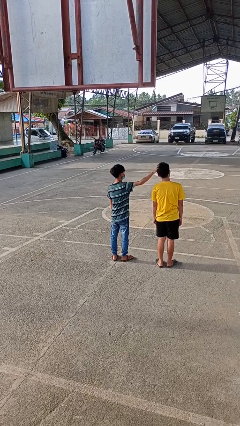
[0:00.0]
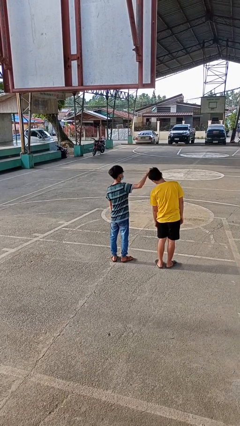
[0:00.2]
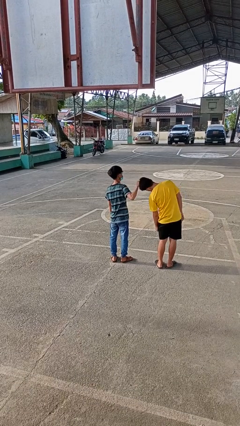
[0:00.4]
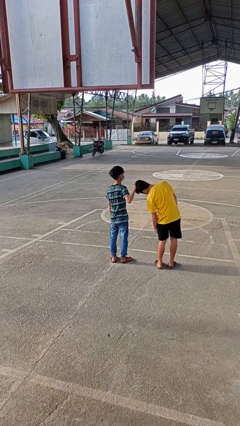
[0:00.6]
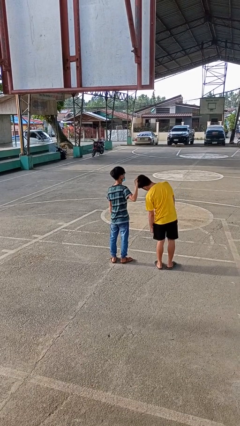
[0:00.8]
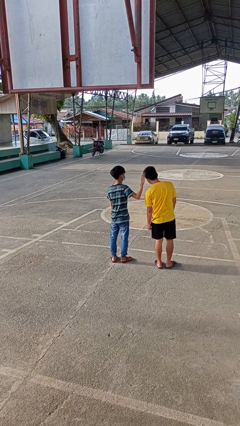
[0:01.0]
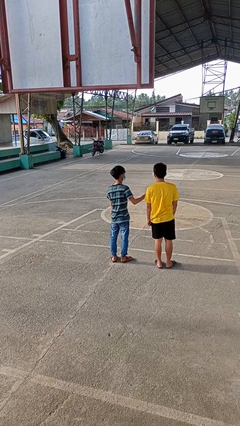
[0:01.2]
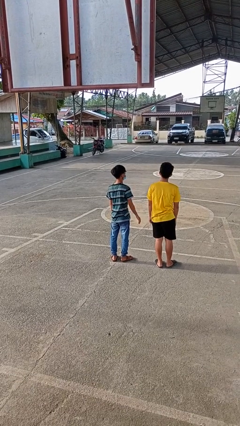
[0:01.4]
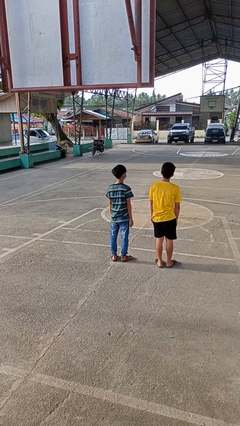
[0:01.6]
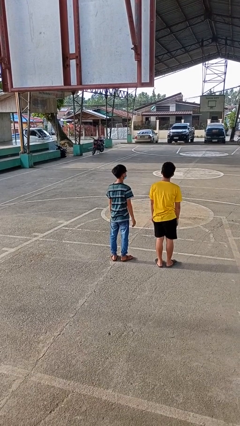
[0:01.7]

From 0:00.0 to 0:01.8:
person grabs person by hair

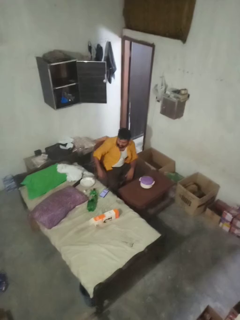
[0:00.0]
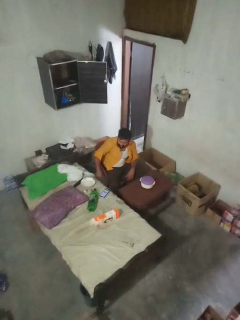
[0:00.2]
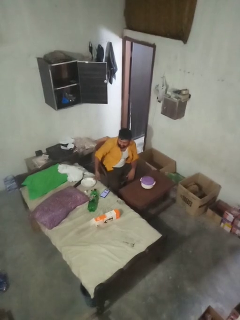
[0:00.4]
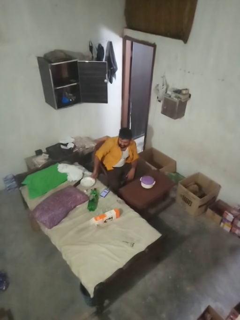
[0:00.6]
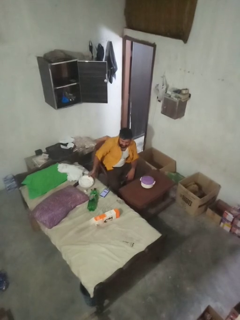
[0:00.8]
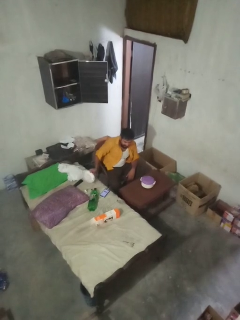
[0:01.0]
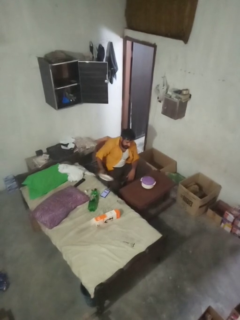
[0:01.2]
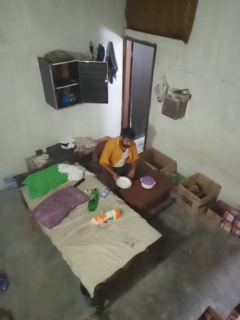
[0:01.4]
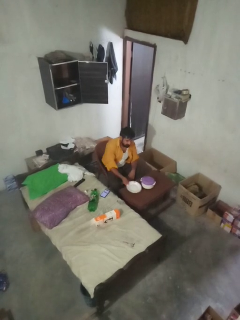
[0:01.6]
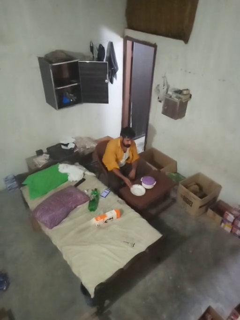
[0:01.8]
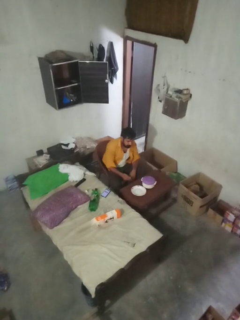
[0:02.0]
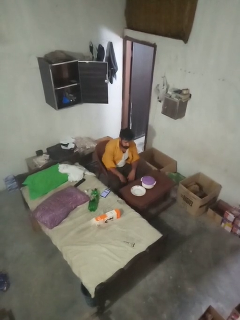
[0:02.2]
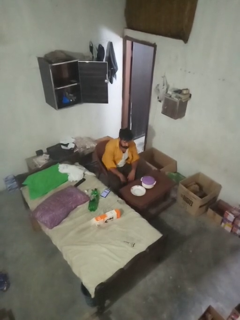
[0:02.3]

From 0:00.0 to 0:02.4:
person sets table

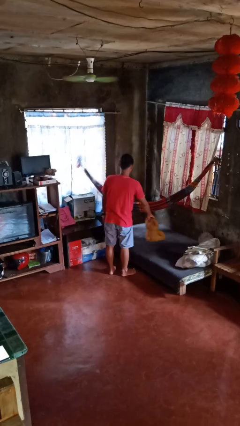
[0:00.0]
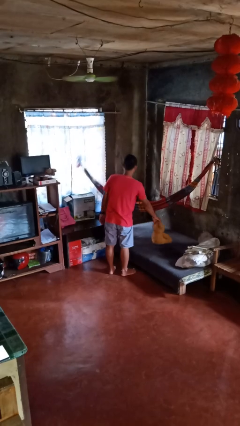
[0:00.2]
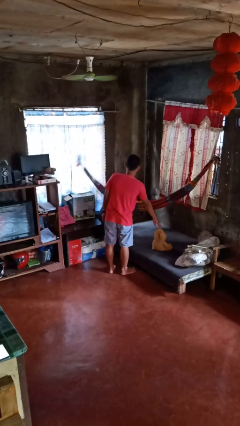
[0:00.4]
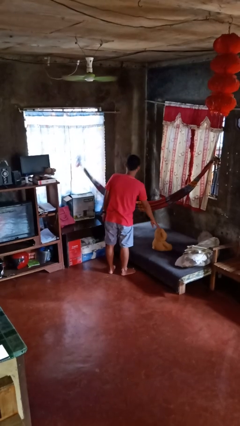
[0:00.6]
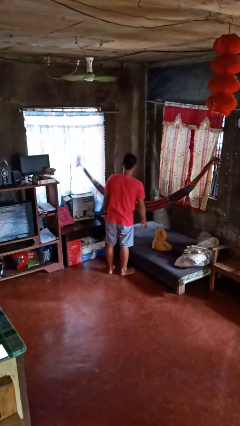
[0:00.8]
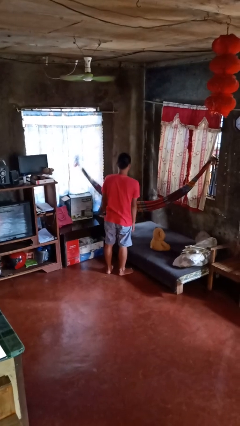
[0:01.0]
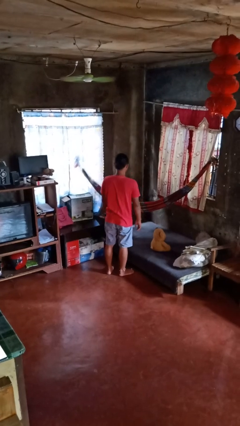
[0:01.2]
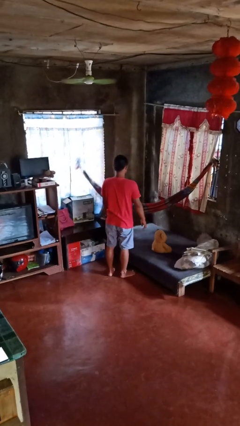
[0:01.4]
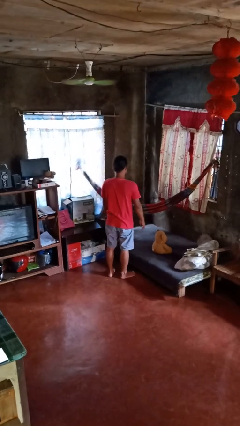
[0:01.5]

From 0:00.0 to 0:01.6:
person puts down object on bed

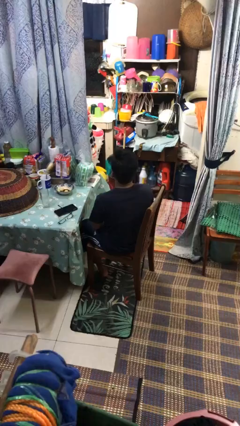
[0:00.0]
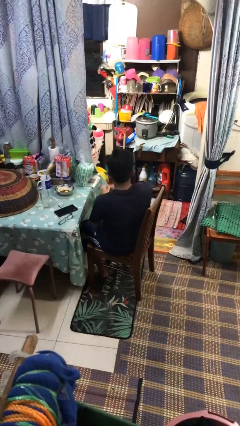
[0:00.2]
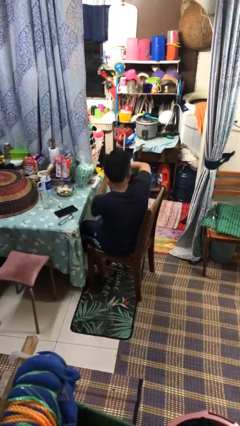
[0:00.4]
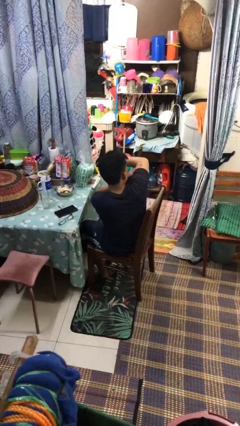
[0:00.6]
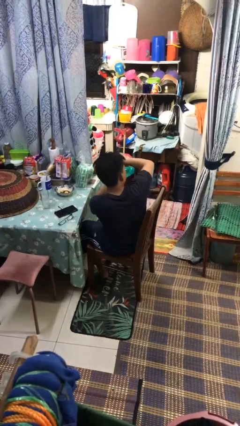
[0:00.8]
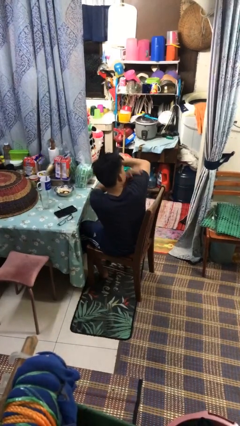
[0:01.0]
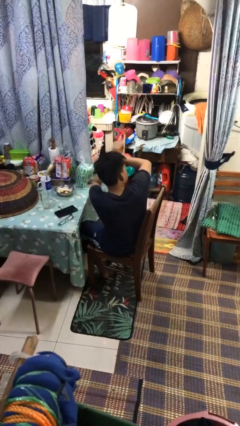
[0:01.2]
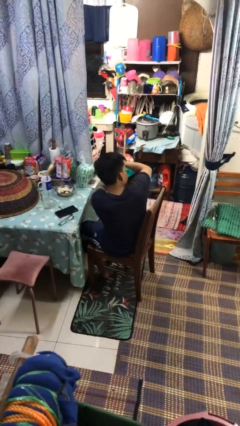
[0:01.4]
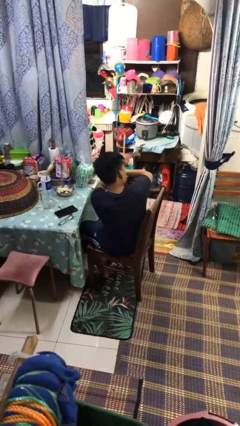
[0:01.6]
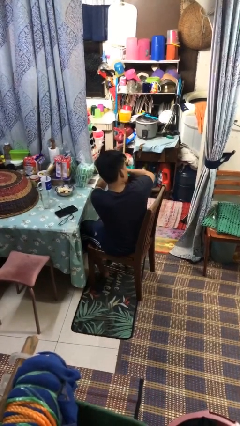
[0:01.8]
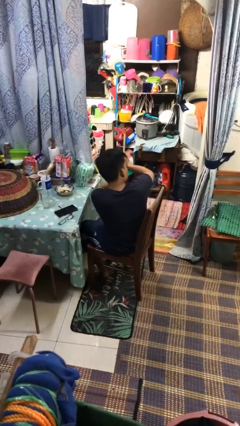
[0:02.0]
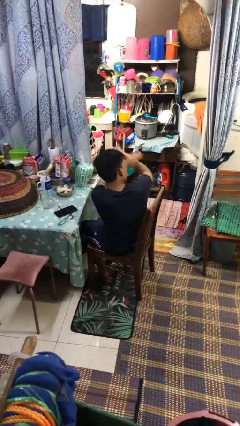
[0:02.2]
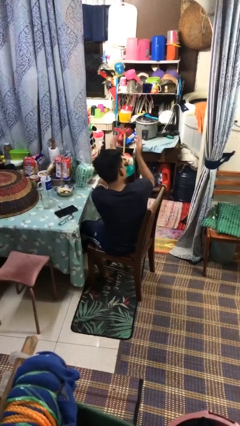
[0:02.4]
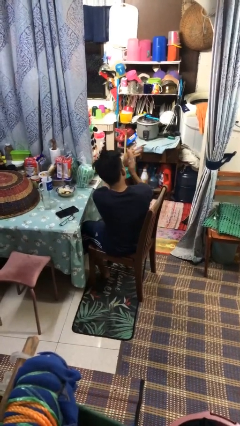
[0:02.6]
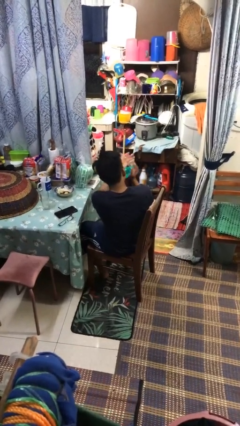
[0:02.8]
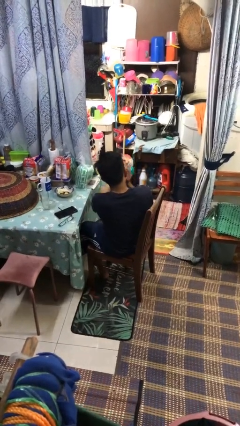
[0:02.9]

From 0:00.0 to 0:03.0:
person swats bug

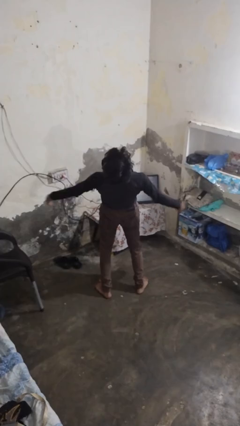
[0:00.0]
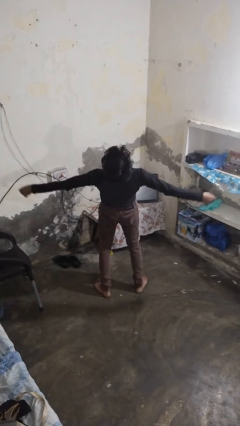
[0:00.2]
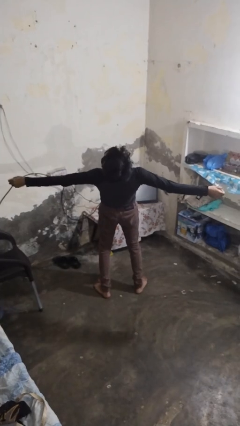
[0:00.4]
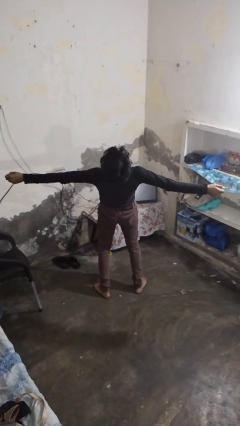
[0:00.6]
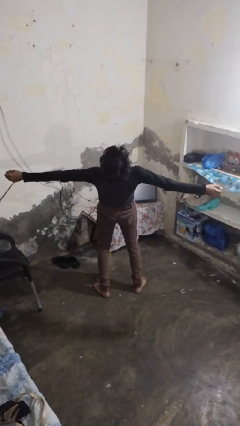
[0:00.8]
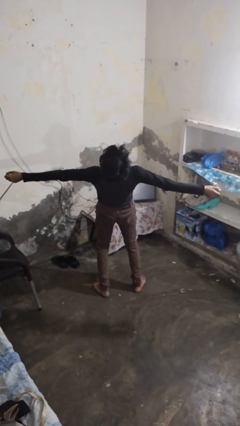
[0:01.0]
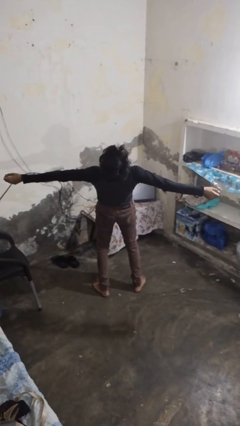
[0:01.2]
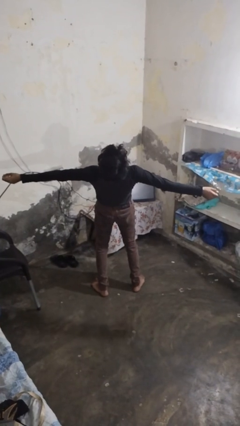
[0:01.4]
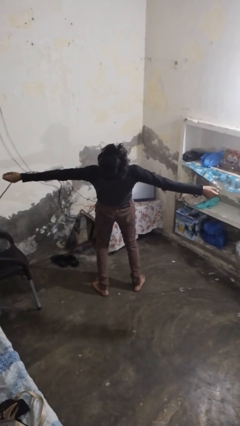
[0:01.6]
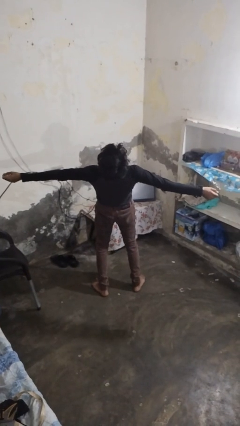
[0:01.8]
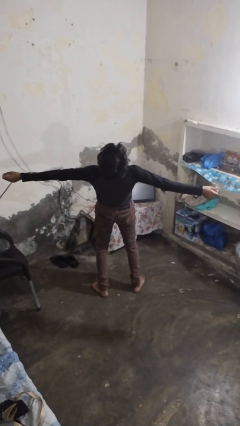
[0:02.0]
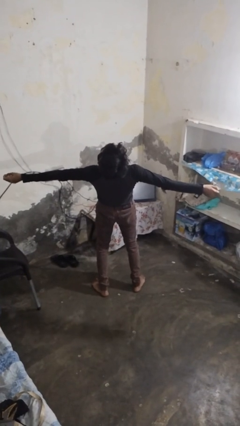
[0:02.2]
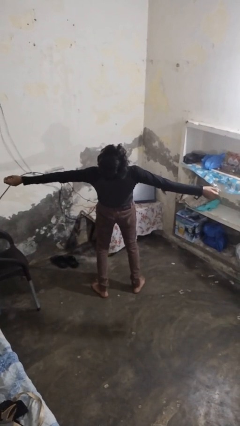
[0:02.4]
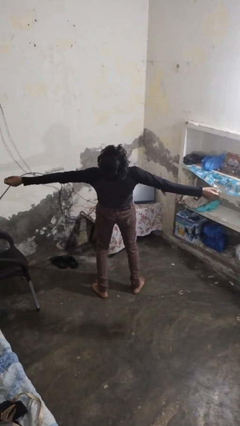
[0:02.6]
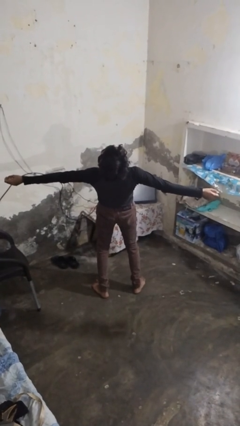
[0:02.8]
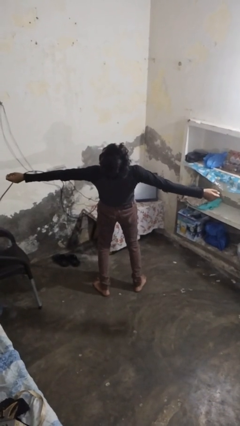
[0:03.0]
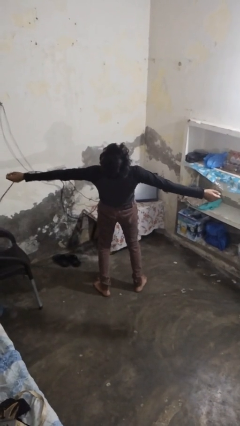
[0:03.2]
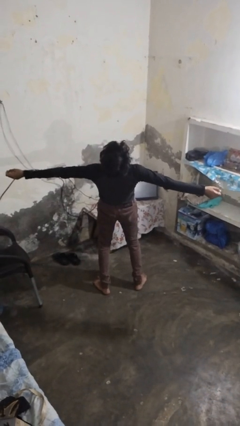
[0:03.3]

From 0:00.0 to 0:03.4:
person stretches arms to side

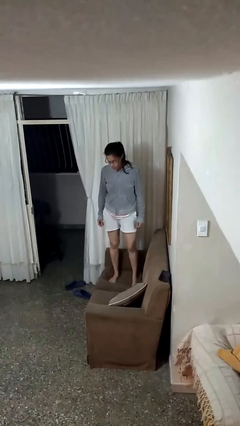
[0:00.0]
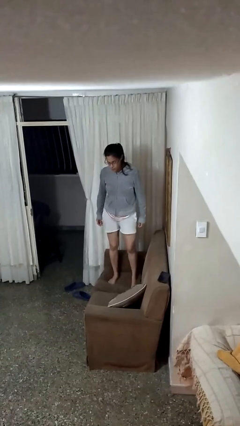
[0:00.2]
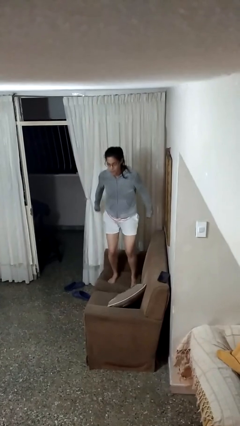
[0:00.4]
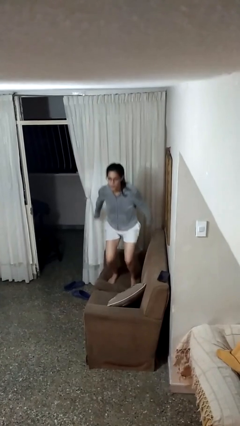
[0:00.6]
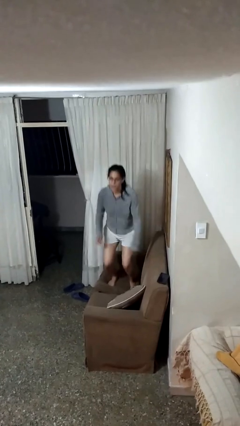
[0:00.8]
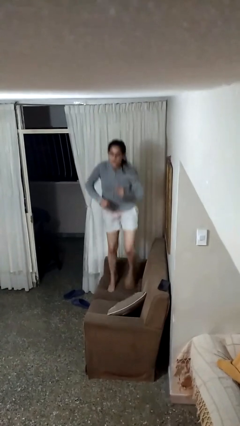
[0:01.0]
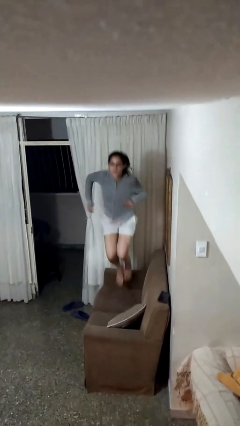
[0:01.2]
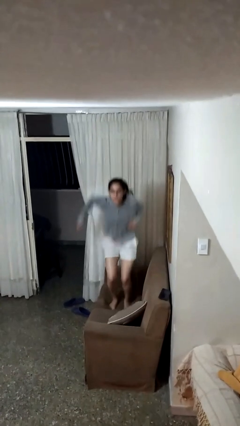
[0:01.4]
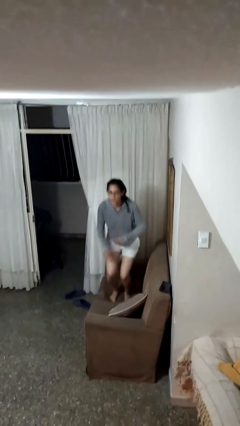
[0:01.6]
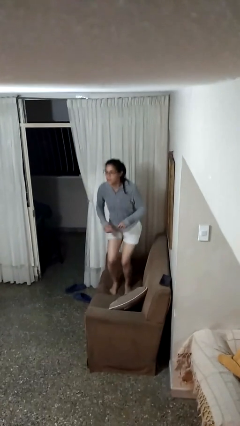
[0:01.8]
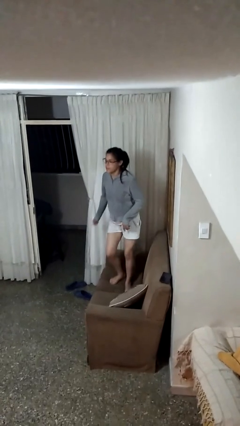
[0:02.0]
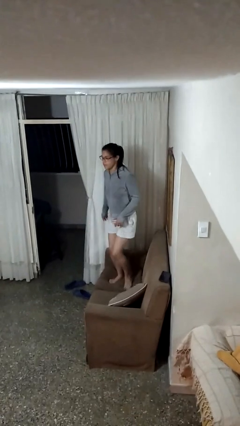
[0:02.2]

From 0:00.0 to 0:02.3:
person jumps on couch

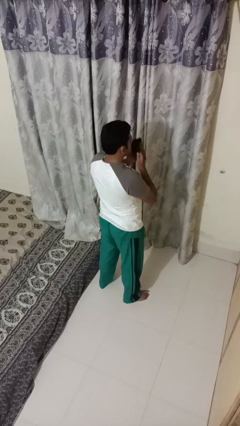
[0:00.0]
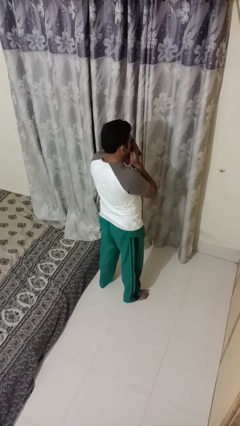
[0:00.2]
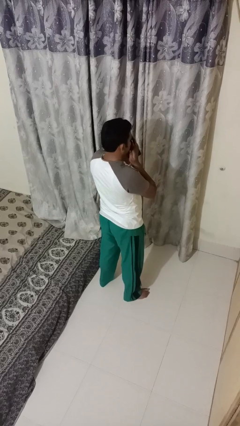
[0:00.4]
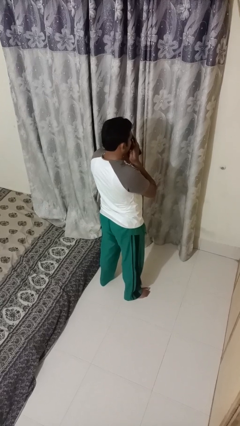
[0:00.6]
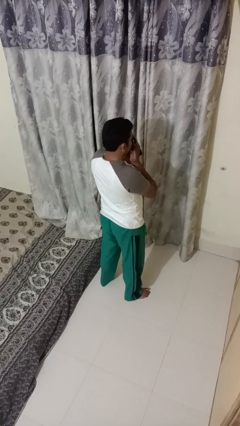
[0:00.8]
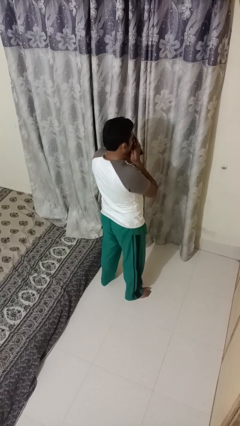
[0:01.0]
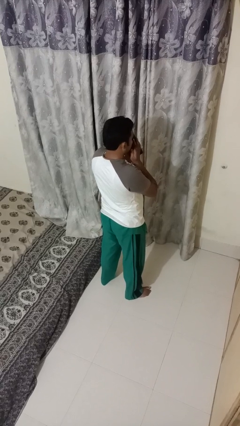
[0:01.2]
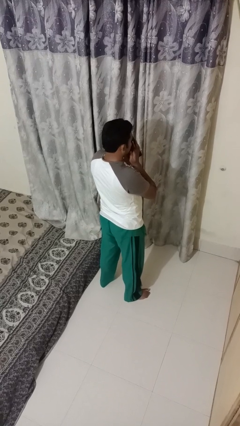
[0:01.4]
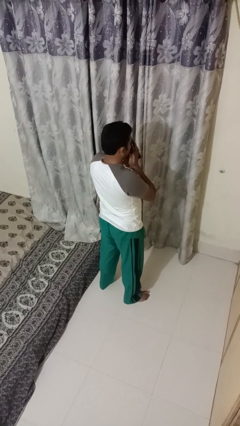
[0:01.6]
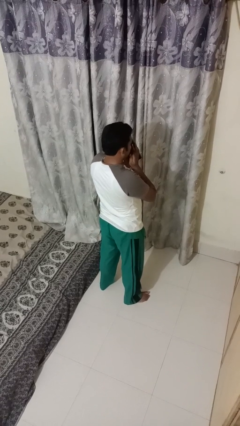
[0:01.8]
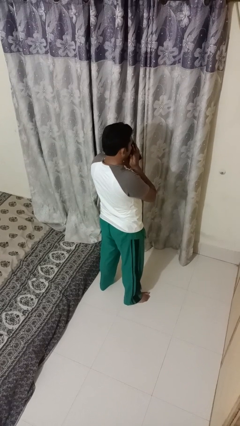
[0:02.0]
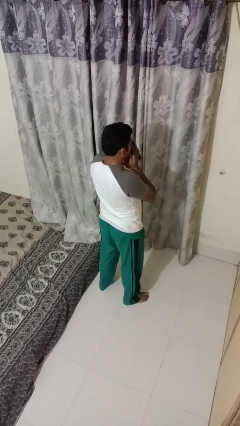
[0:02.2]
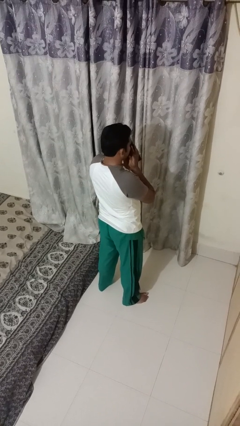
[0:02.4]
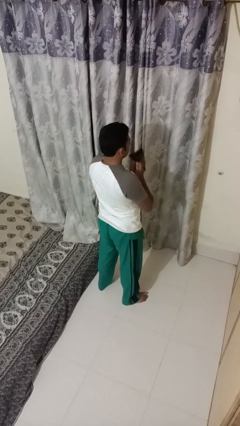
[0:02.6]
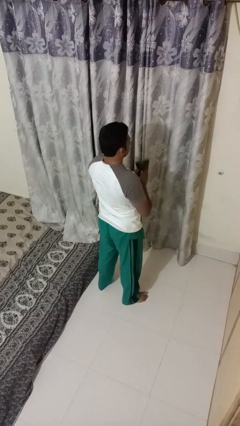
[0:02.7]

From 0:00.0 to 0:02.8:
person blows nose

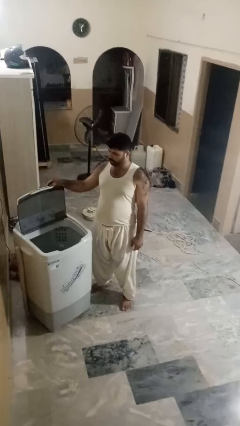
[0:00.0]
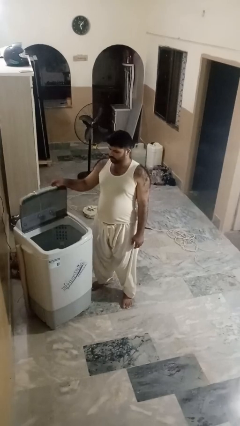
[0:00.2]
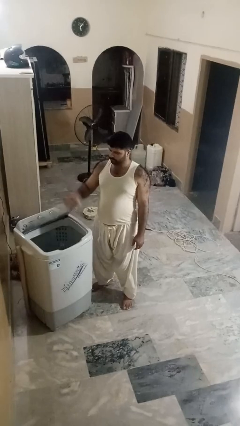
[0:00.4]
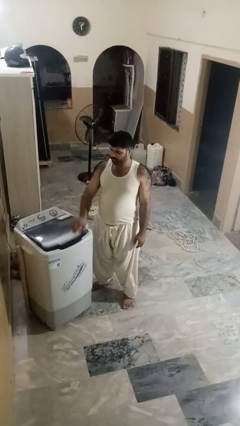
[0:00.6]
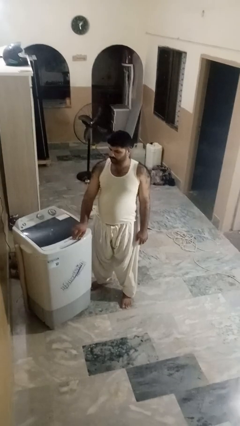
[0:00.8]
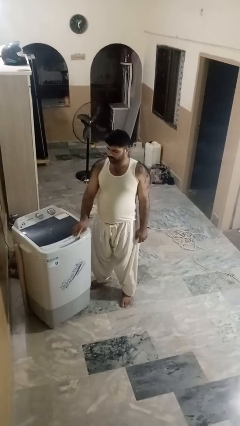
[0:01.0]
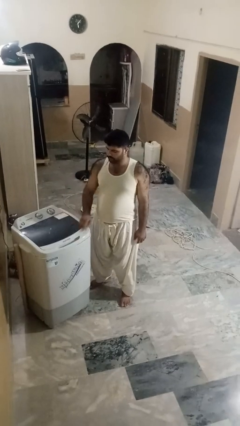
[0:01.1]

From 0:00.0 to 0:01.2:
person closes clothes washer
